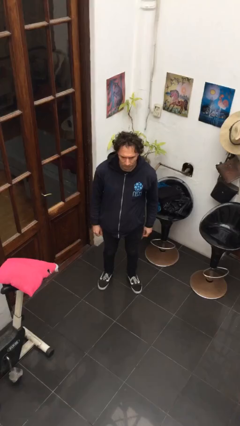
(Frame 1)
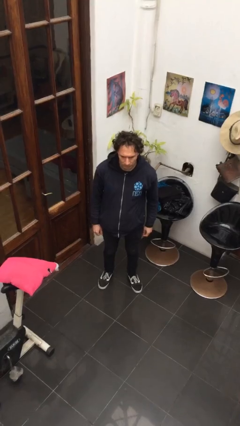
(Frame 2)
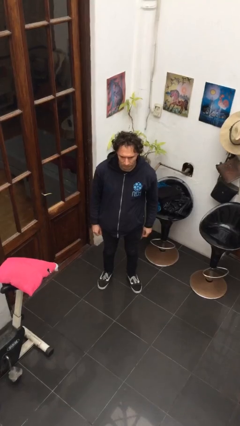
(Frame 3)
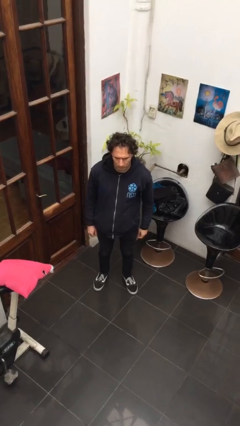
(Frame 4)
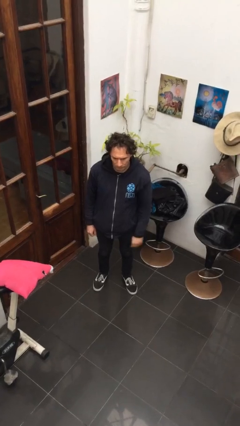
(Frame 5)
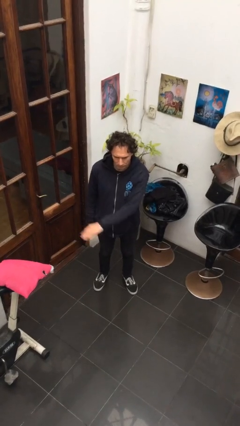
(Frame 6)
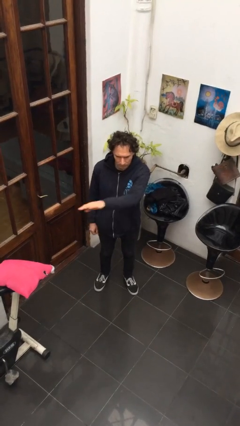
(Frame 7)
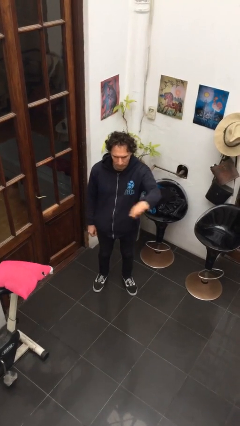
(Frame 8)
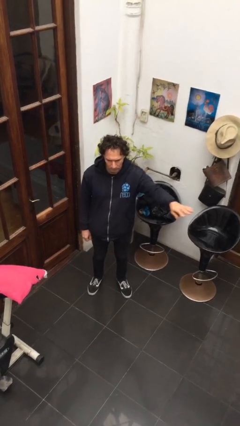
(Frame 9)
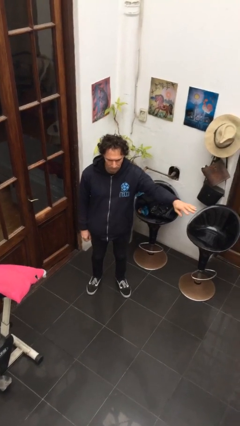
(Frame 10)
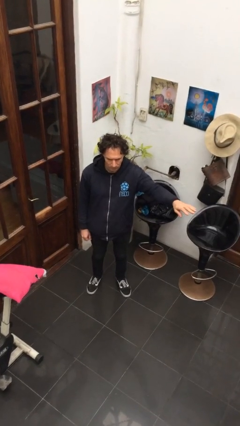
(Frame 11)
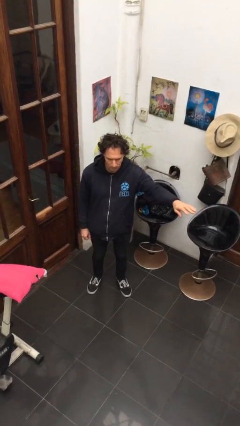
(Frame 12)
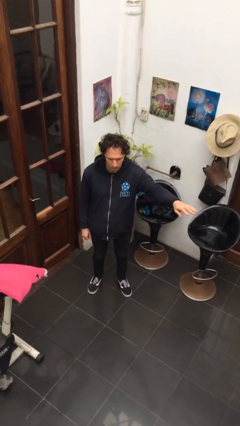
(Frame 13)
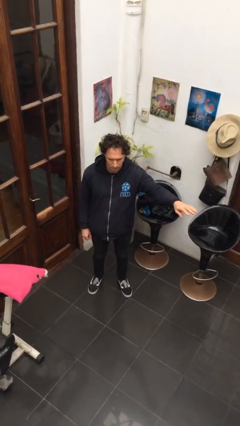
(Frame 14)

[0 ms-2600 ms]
person gestures swipe left

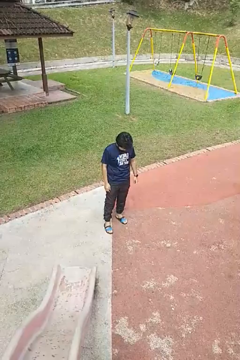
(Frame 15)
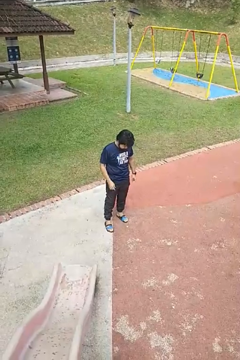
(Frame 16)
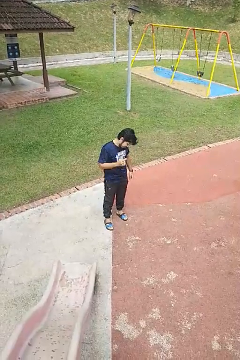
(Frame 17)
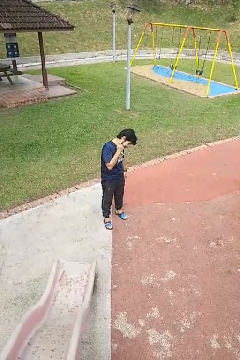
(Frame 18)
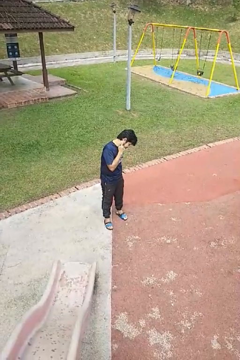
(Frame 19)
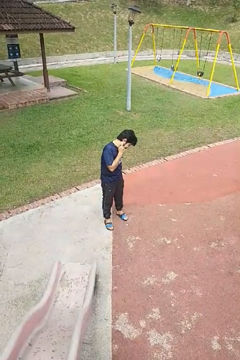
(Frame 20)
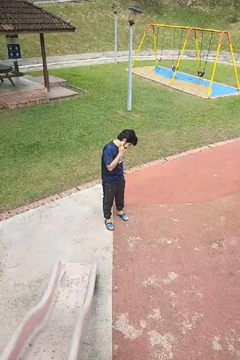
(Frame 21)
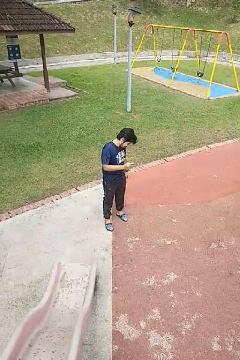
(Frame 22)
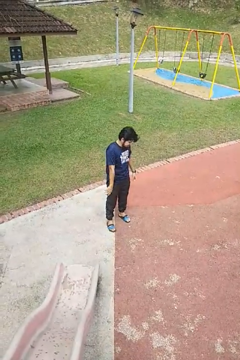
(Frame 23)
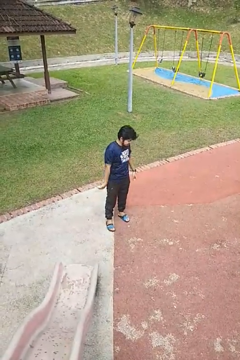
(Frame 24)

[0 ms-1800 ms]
person gestures listen closely

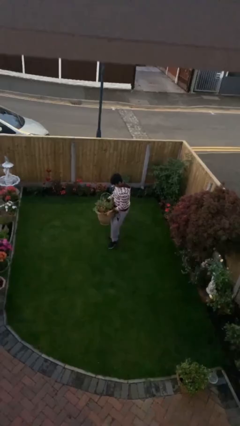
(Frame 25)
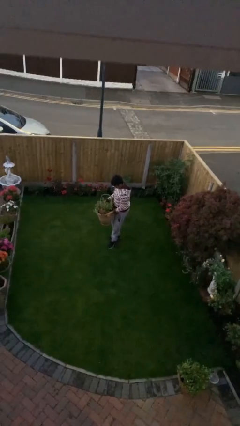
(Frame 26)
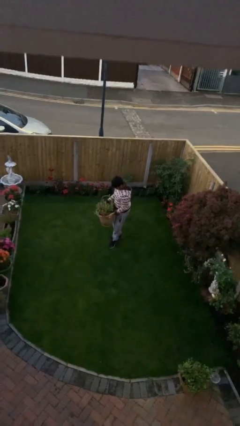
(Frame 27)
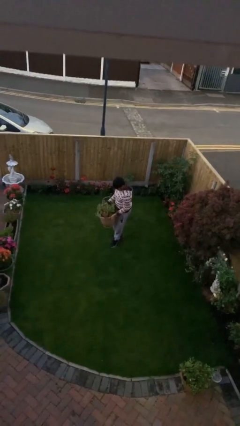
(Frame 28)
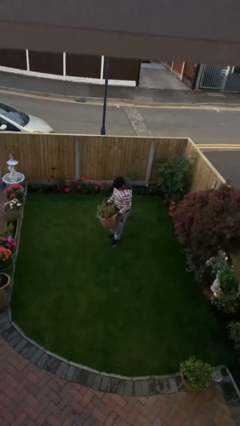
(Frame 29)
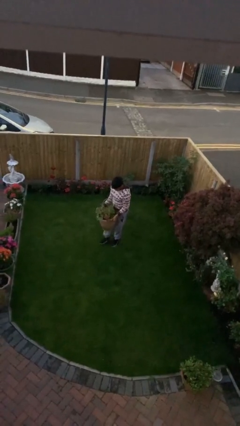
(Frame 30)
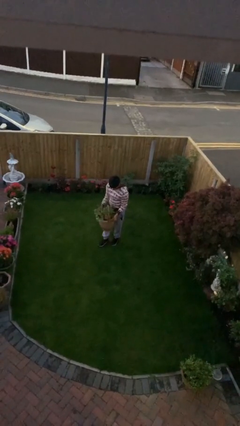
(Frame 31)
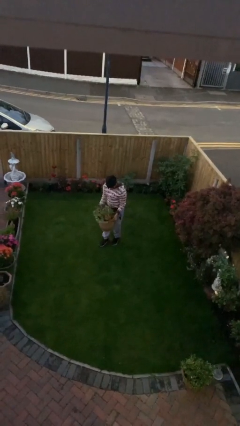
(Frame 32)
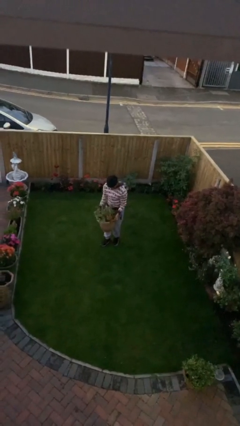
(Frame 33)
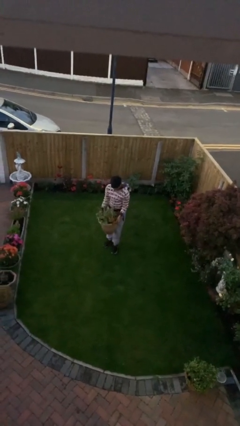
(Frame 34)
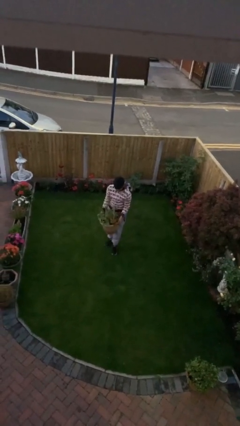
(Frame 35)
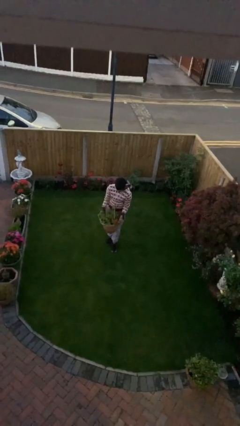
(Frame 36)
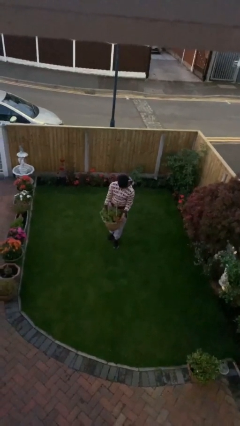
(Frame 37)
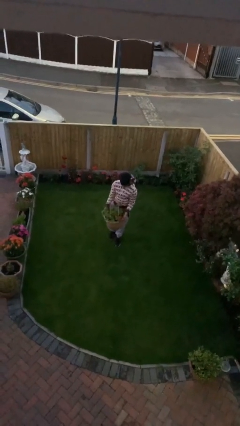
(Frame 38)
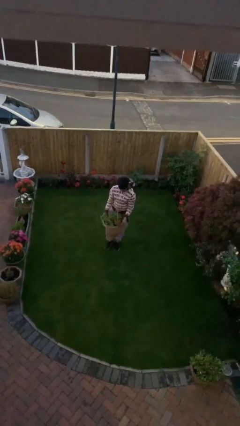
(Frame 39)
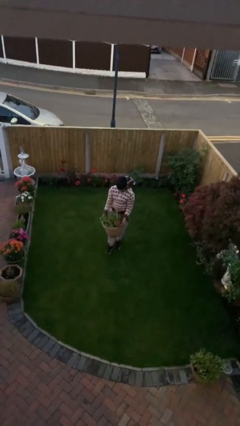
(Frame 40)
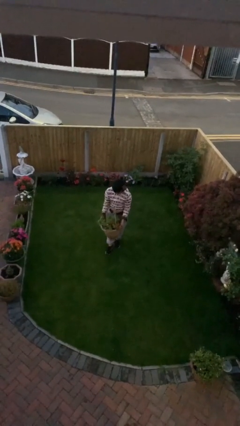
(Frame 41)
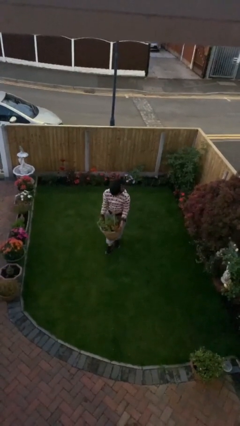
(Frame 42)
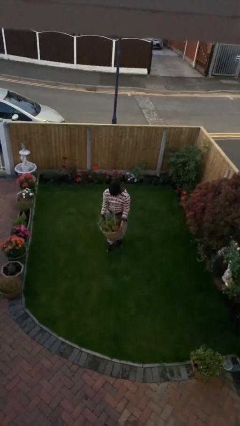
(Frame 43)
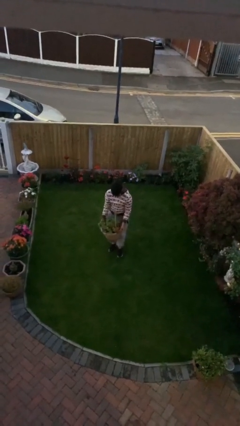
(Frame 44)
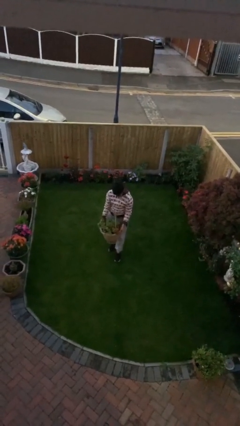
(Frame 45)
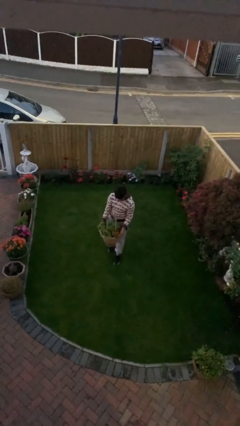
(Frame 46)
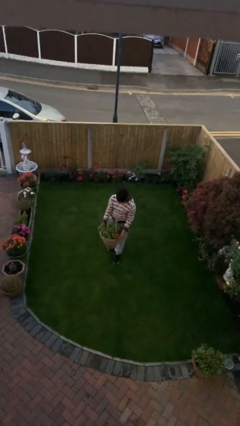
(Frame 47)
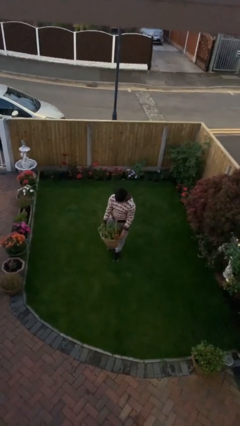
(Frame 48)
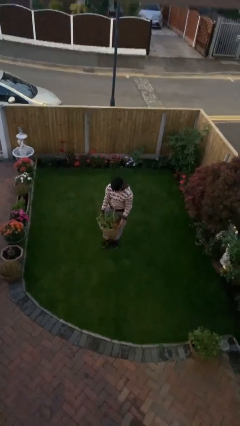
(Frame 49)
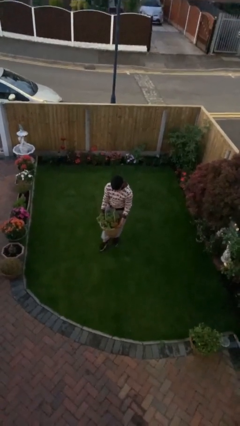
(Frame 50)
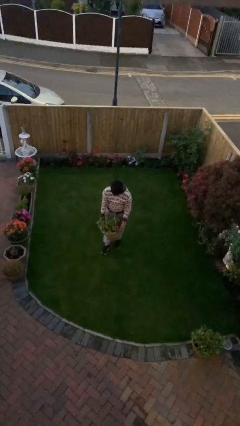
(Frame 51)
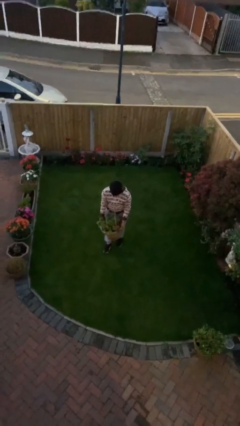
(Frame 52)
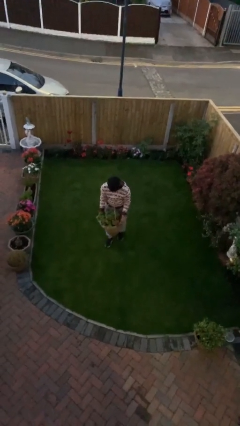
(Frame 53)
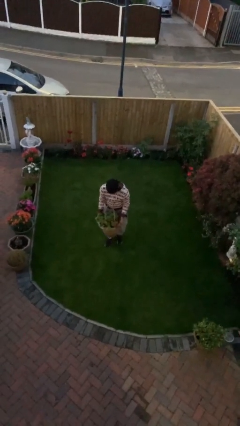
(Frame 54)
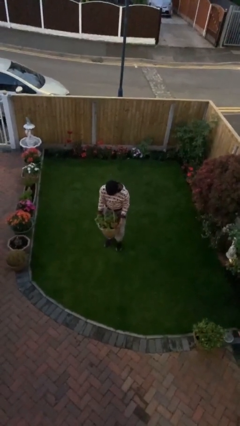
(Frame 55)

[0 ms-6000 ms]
person carries heavy object

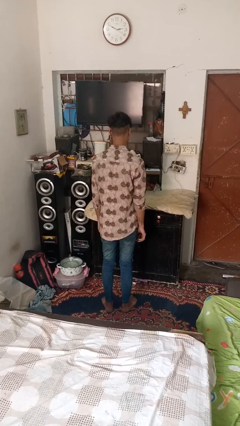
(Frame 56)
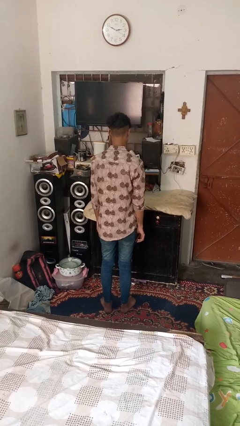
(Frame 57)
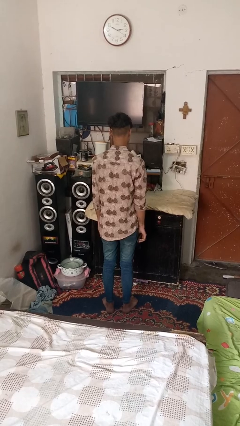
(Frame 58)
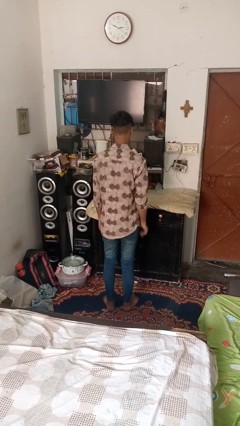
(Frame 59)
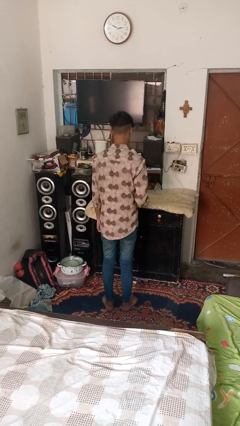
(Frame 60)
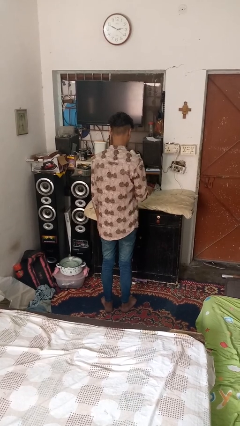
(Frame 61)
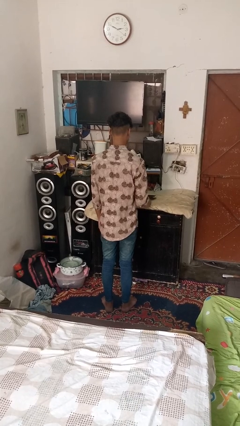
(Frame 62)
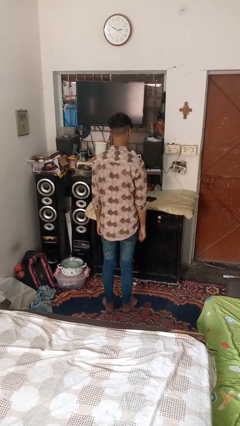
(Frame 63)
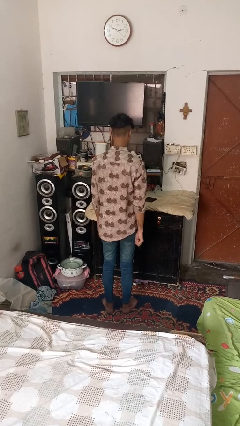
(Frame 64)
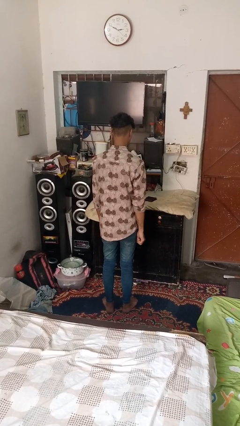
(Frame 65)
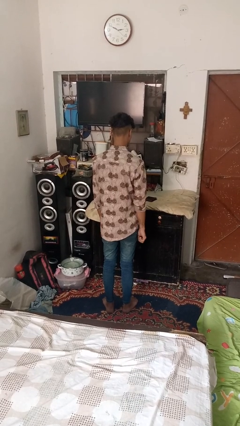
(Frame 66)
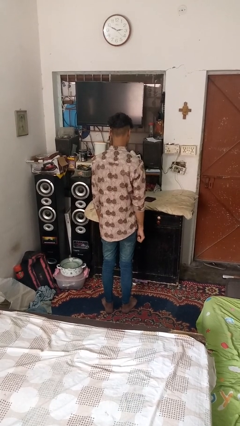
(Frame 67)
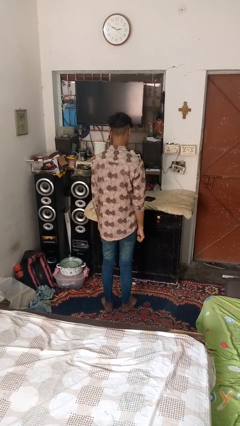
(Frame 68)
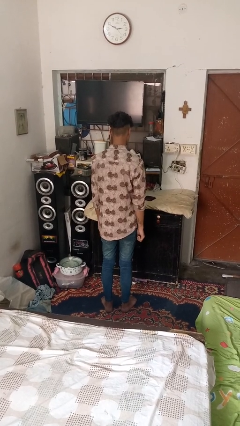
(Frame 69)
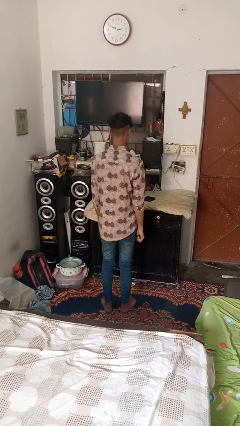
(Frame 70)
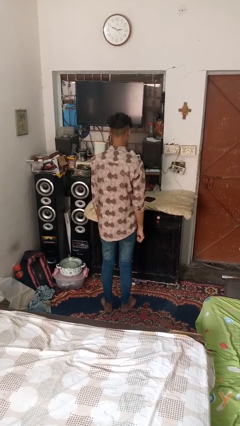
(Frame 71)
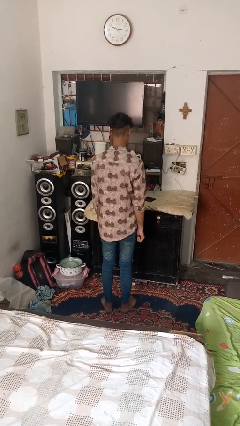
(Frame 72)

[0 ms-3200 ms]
person throws object on table

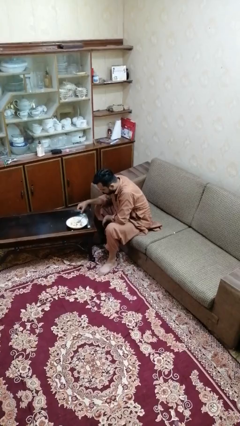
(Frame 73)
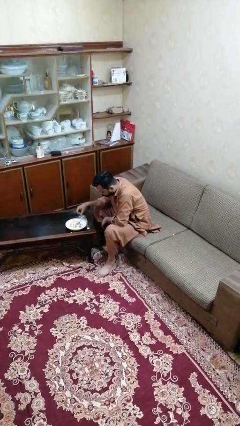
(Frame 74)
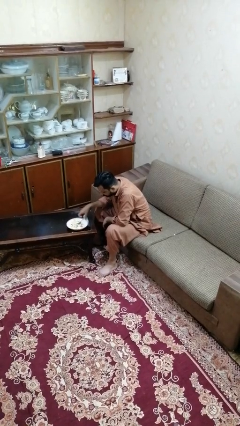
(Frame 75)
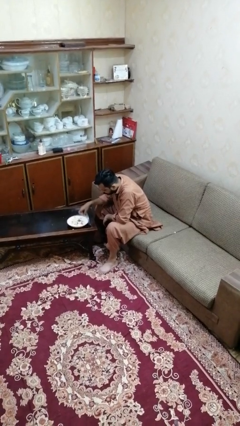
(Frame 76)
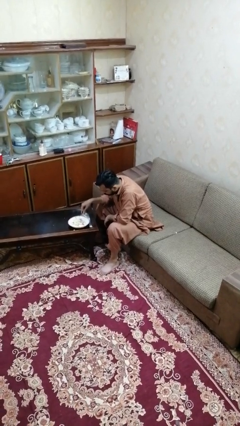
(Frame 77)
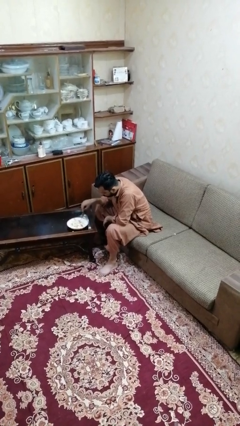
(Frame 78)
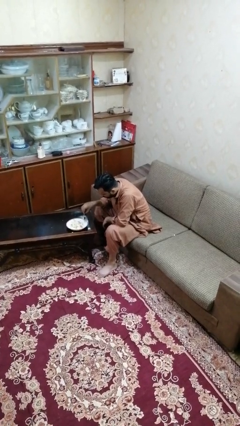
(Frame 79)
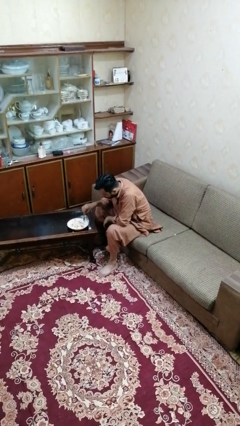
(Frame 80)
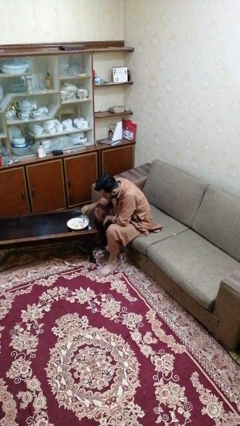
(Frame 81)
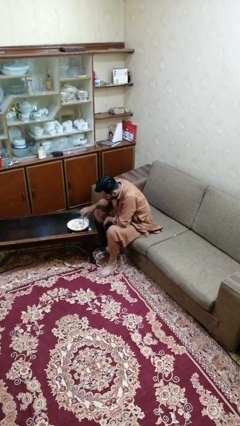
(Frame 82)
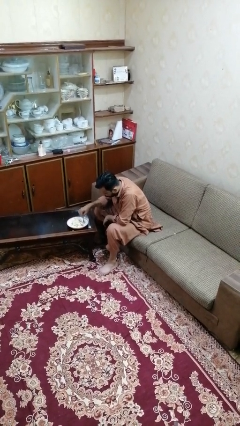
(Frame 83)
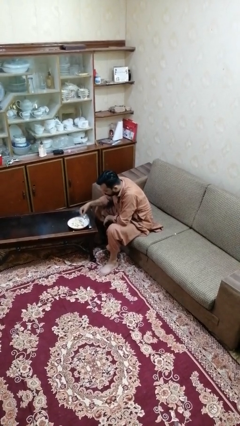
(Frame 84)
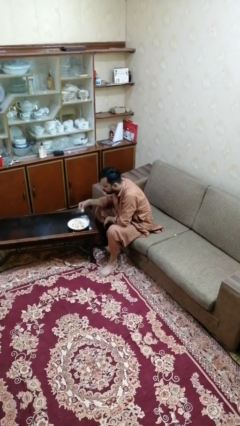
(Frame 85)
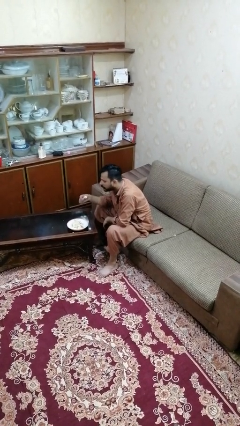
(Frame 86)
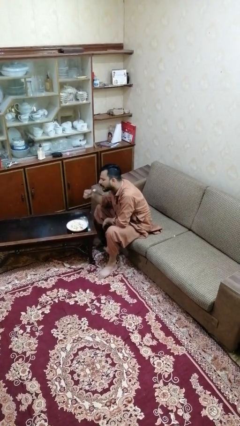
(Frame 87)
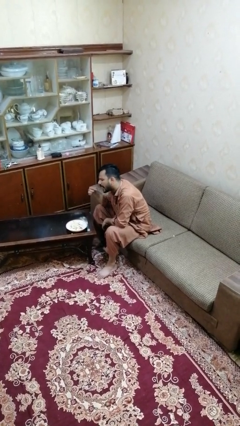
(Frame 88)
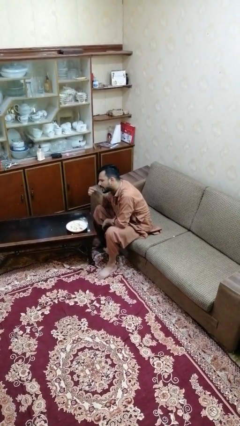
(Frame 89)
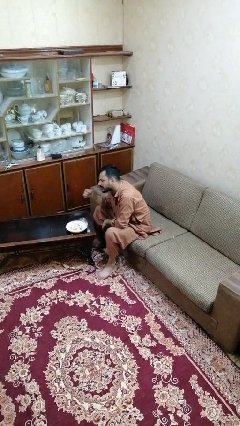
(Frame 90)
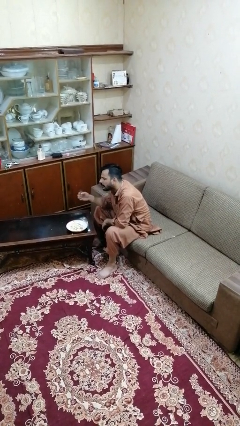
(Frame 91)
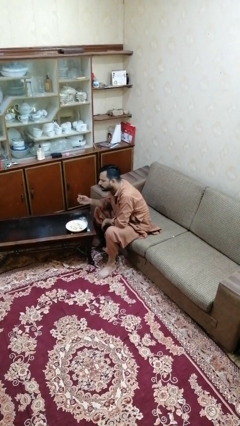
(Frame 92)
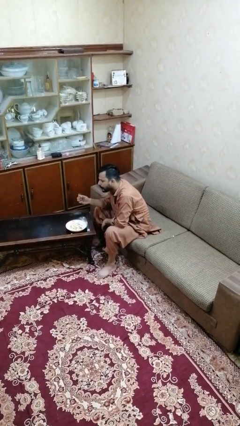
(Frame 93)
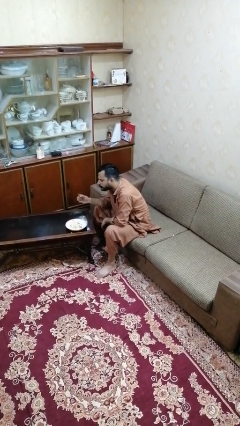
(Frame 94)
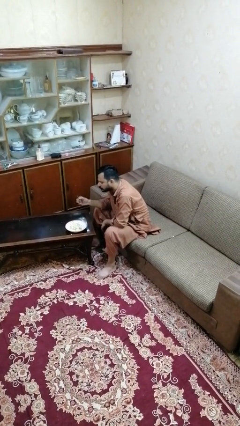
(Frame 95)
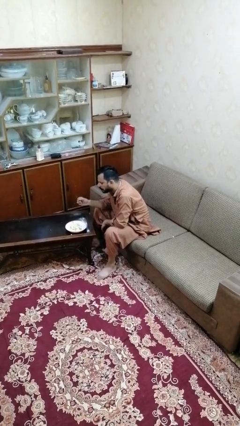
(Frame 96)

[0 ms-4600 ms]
person eats with utensil
